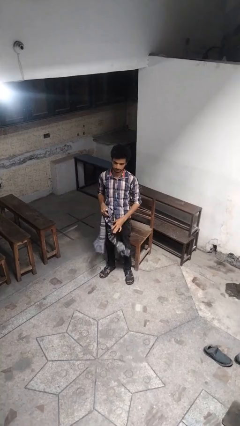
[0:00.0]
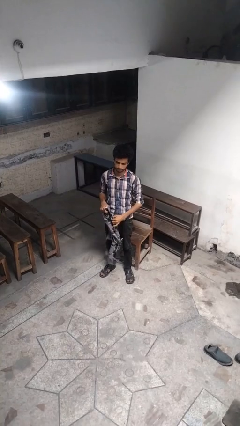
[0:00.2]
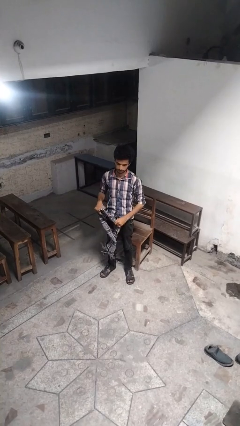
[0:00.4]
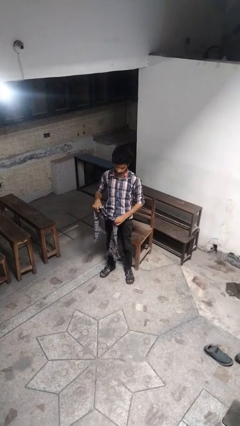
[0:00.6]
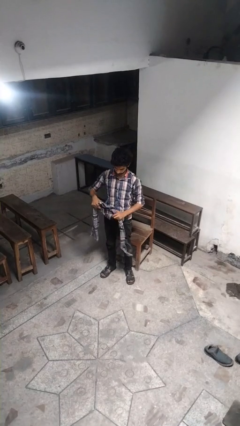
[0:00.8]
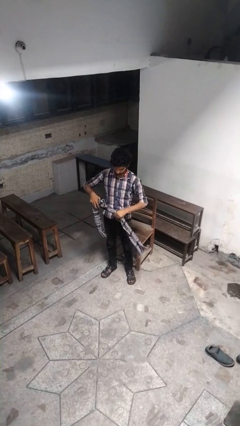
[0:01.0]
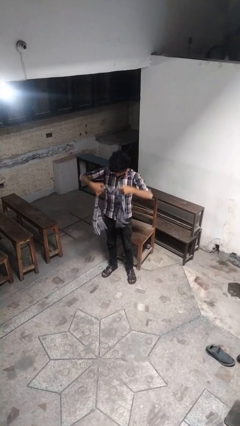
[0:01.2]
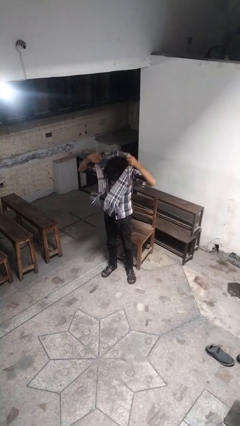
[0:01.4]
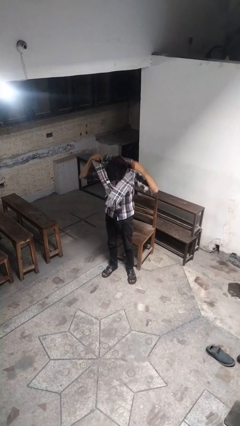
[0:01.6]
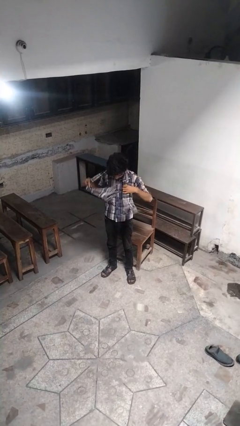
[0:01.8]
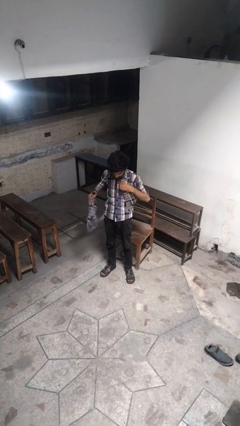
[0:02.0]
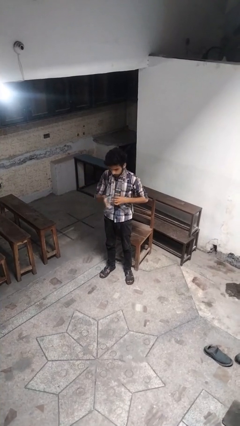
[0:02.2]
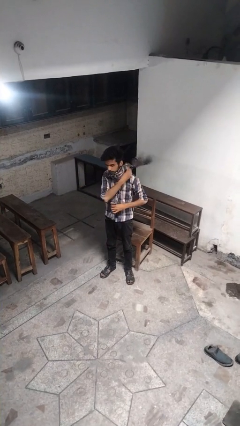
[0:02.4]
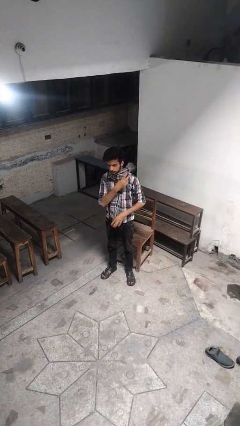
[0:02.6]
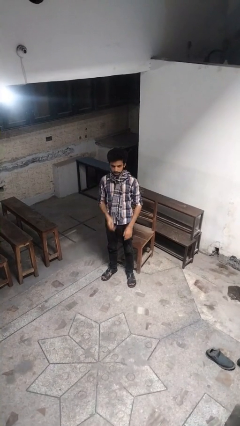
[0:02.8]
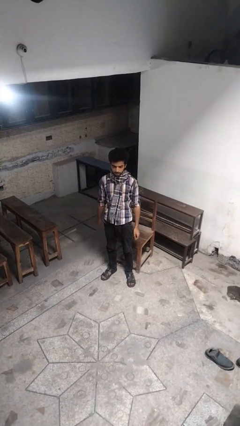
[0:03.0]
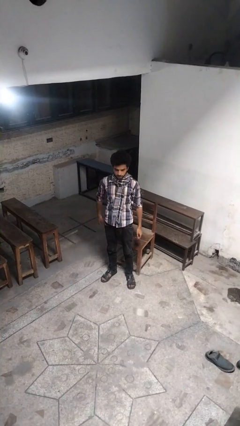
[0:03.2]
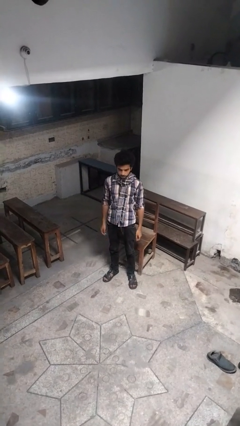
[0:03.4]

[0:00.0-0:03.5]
person puts on scarf

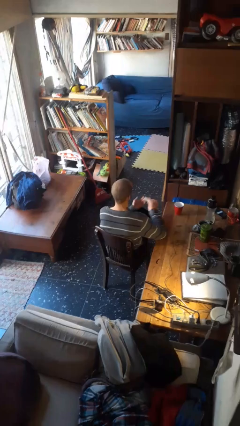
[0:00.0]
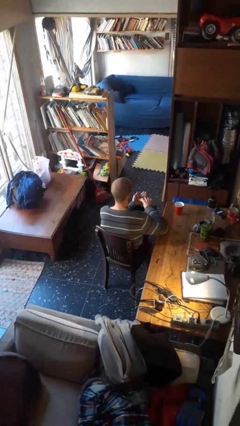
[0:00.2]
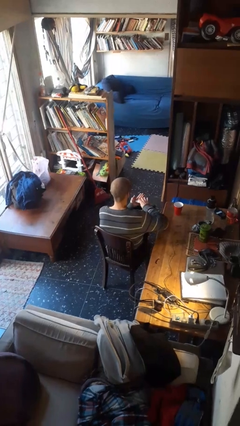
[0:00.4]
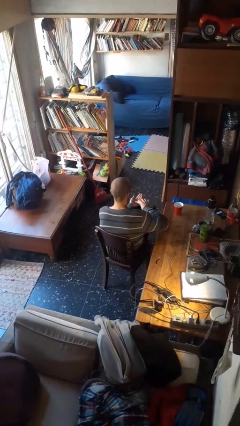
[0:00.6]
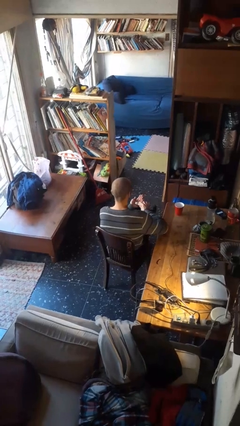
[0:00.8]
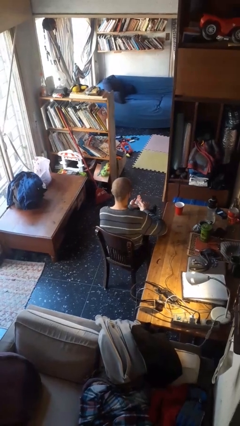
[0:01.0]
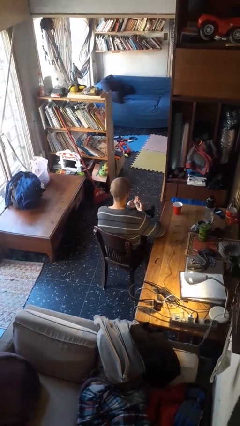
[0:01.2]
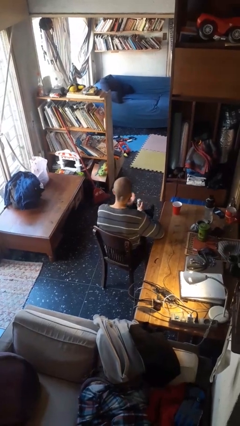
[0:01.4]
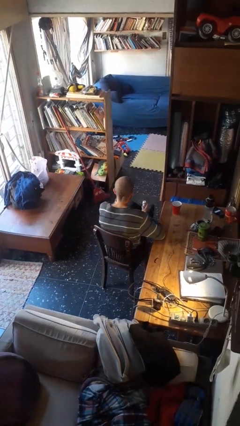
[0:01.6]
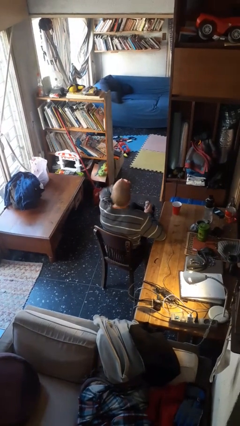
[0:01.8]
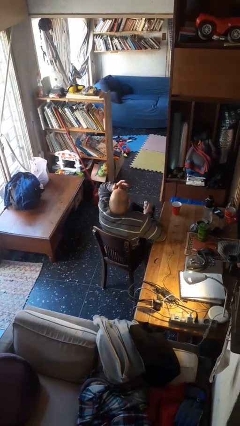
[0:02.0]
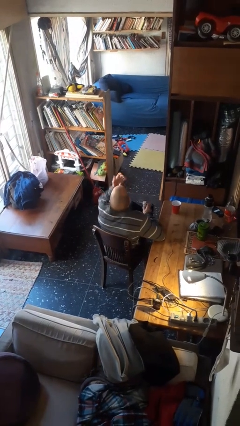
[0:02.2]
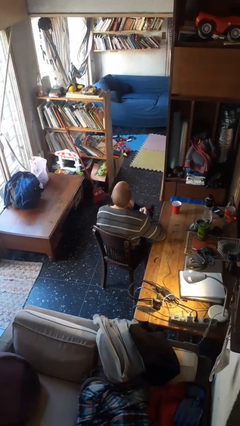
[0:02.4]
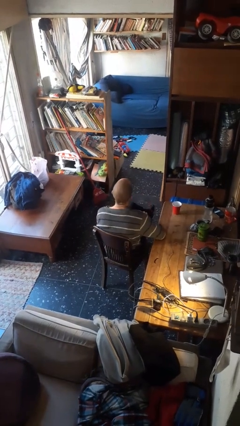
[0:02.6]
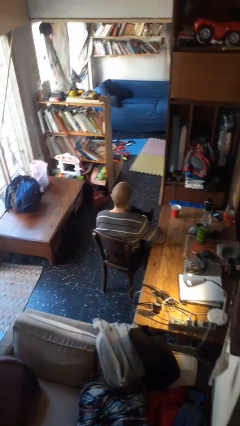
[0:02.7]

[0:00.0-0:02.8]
person takes medicine pills

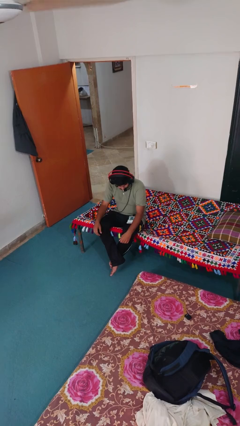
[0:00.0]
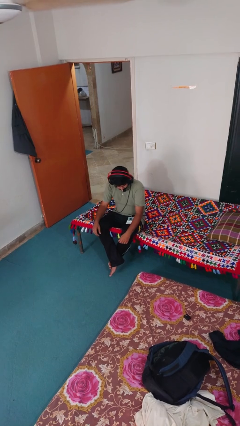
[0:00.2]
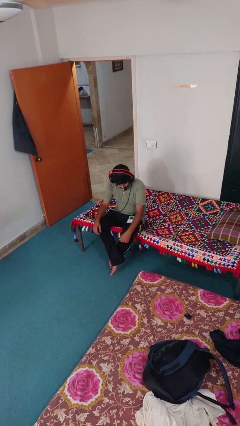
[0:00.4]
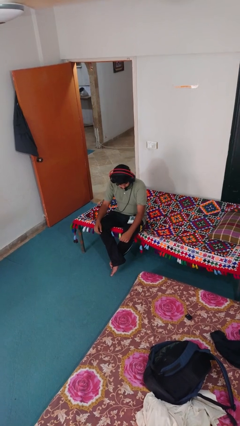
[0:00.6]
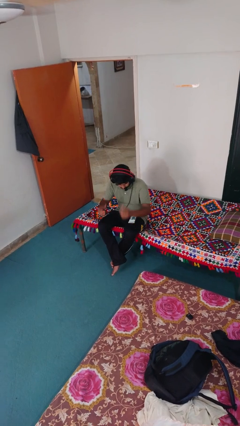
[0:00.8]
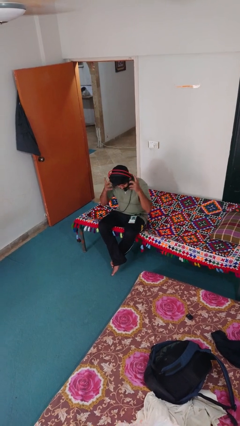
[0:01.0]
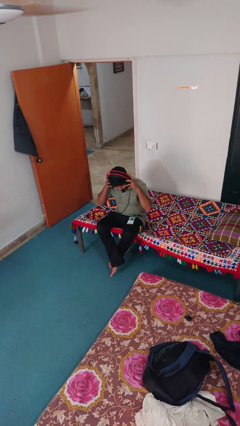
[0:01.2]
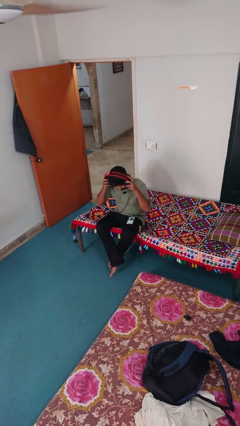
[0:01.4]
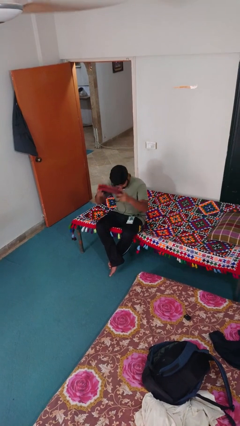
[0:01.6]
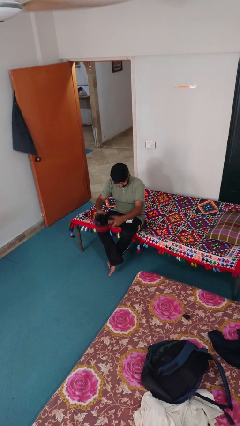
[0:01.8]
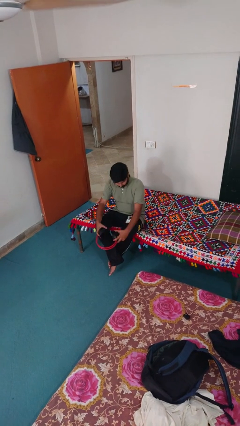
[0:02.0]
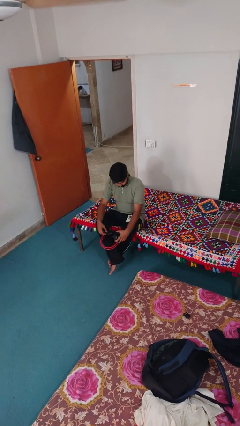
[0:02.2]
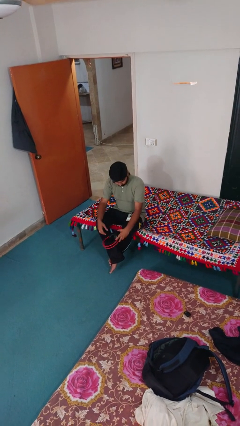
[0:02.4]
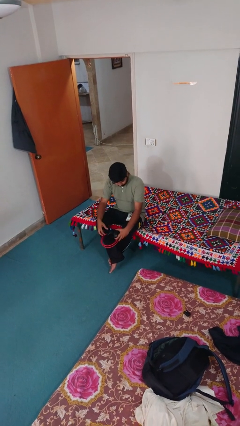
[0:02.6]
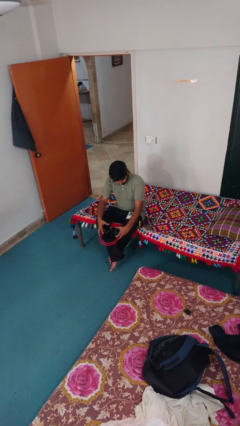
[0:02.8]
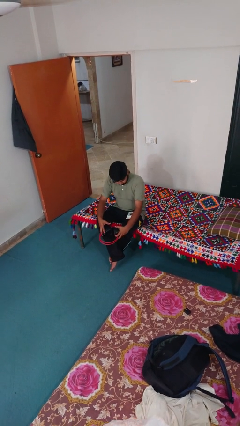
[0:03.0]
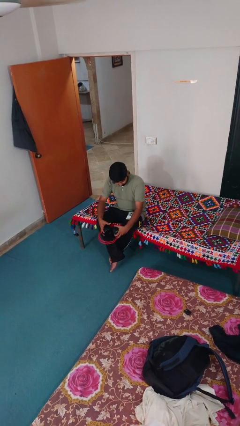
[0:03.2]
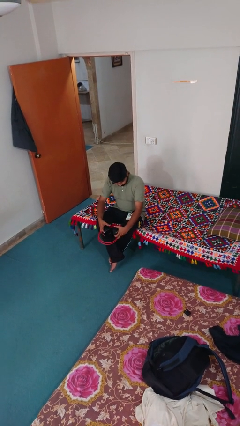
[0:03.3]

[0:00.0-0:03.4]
person takes off headphones

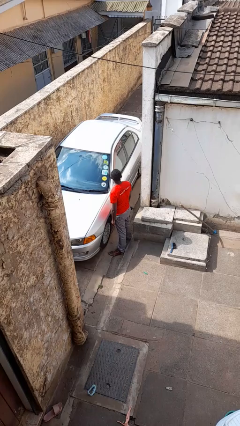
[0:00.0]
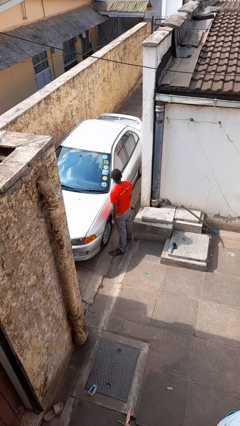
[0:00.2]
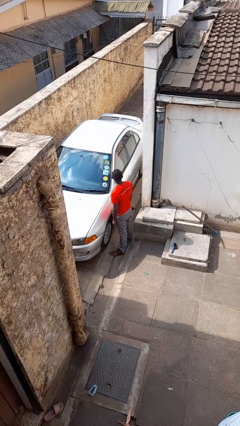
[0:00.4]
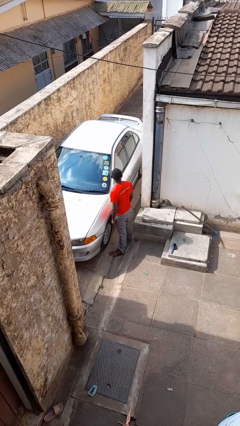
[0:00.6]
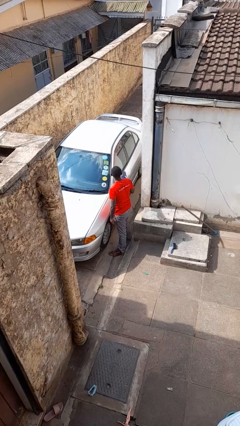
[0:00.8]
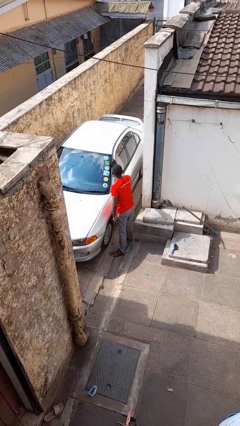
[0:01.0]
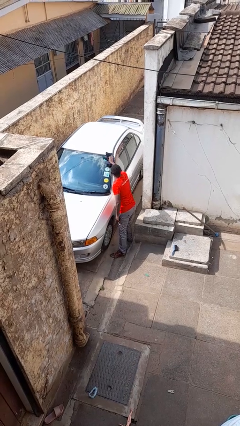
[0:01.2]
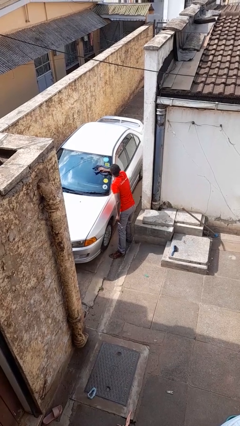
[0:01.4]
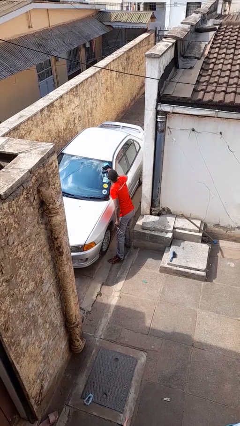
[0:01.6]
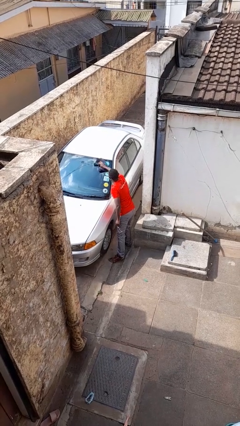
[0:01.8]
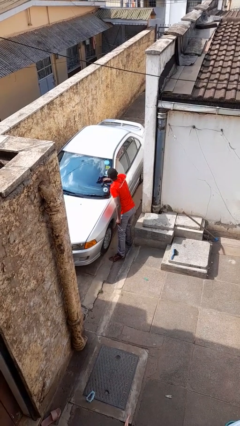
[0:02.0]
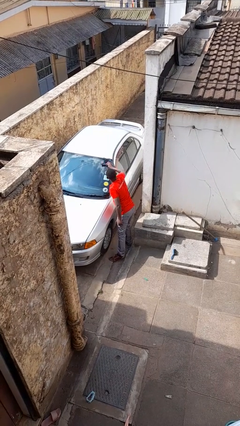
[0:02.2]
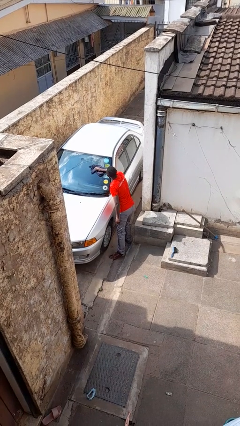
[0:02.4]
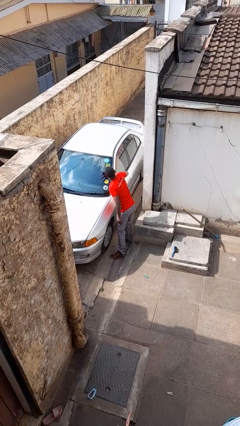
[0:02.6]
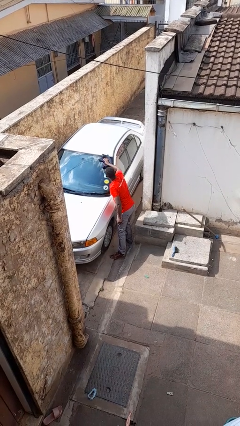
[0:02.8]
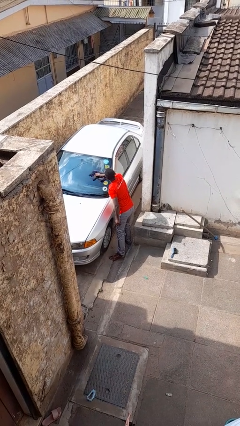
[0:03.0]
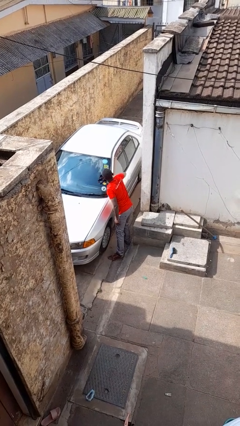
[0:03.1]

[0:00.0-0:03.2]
person polishes car with rag

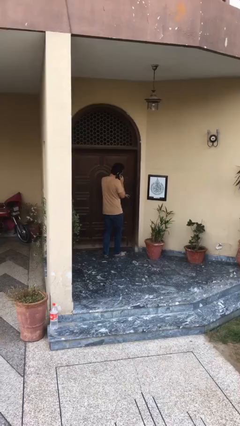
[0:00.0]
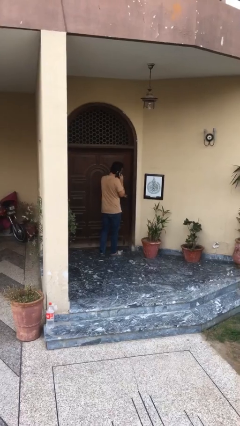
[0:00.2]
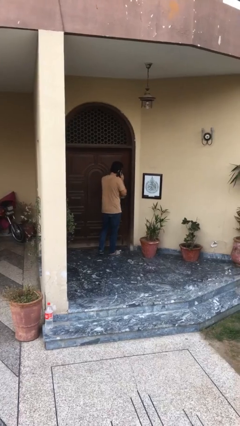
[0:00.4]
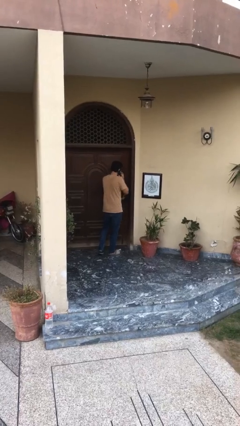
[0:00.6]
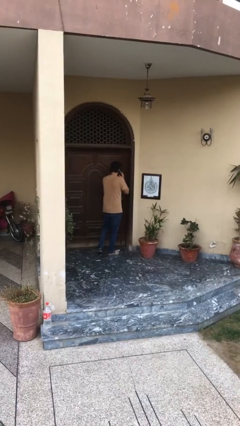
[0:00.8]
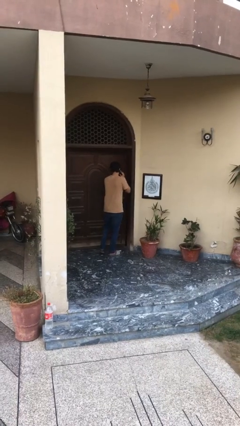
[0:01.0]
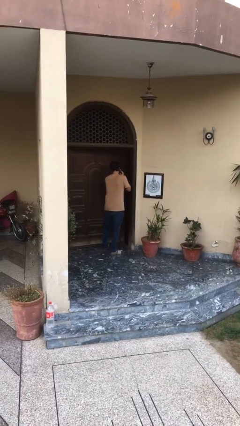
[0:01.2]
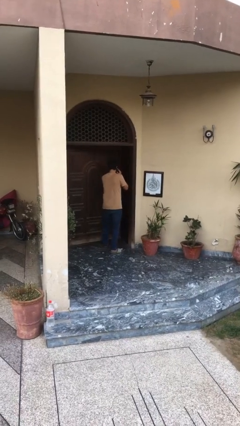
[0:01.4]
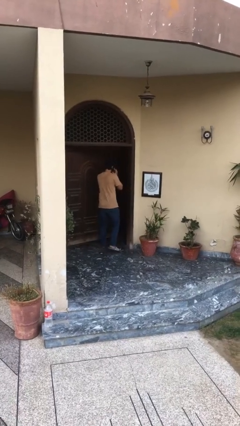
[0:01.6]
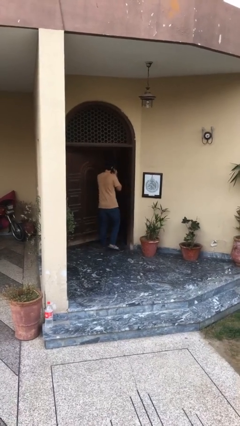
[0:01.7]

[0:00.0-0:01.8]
person opens facility door

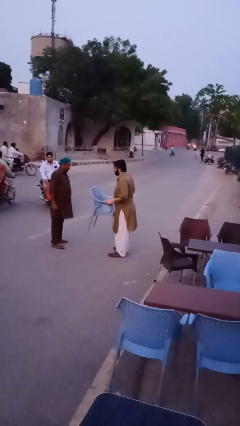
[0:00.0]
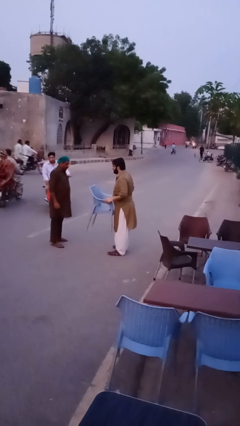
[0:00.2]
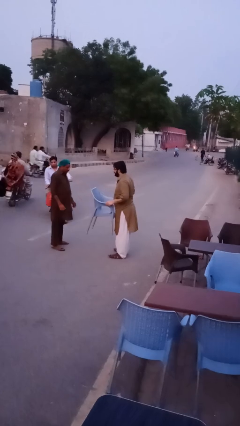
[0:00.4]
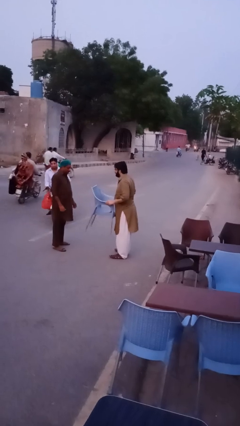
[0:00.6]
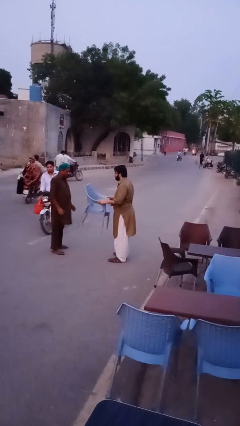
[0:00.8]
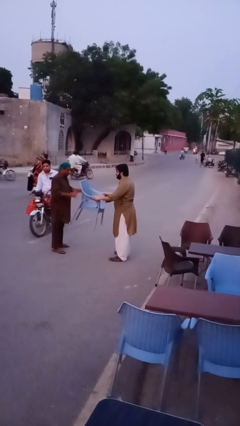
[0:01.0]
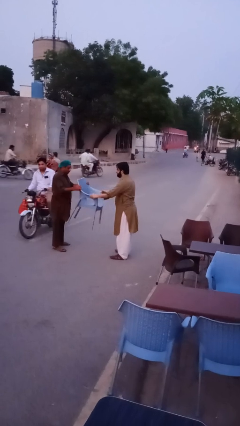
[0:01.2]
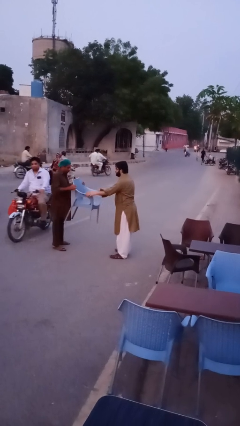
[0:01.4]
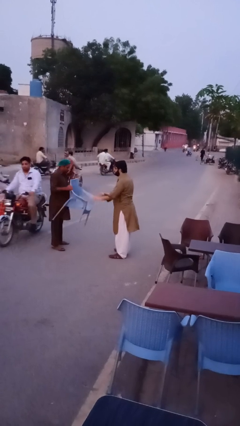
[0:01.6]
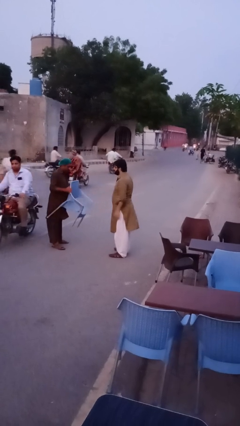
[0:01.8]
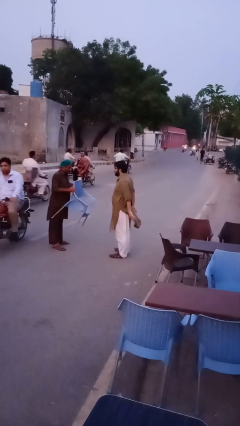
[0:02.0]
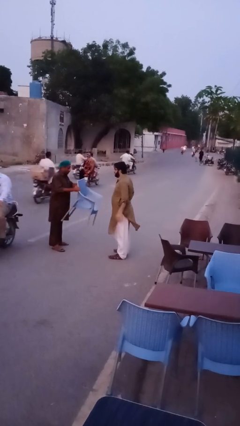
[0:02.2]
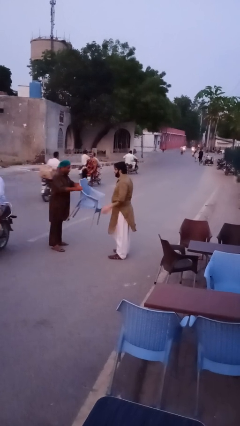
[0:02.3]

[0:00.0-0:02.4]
person transfers object to person
